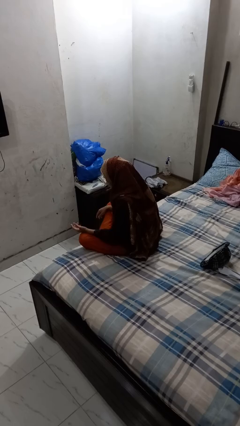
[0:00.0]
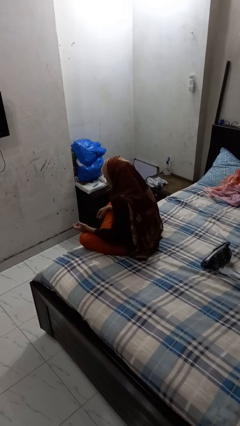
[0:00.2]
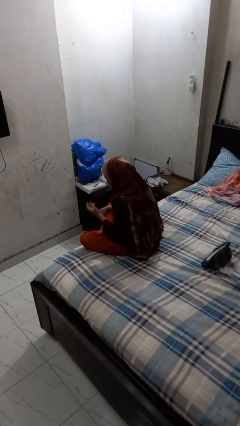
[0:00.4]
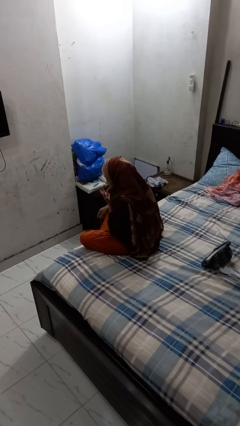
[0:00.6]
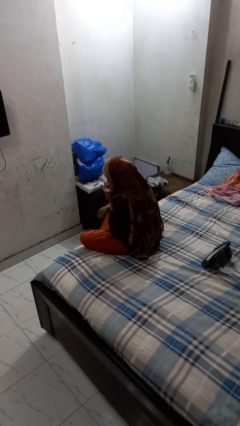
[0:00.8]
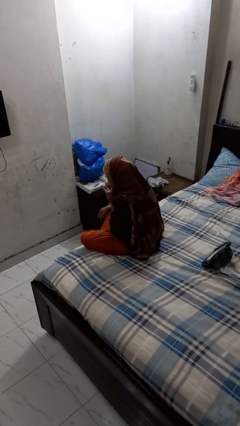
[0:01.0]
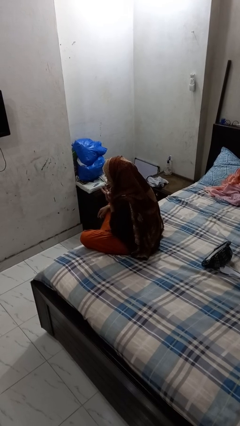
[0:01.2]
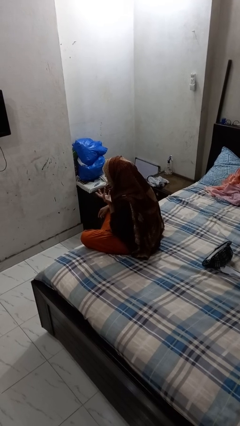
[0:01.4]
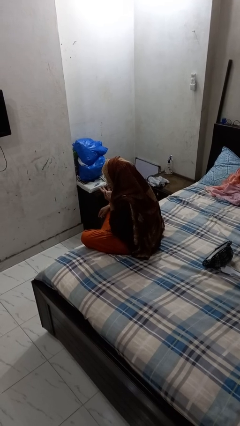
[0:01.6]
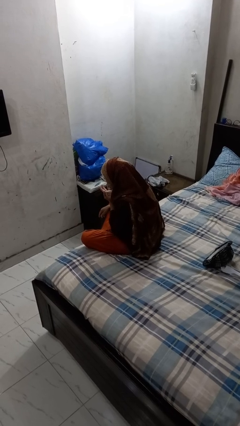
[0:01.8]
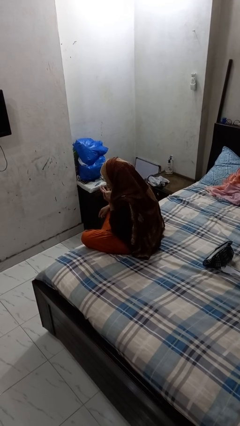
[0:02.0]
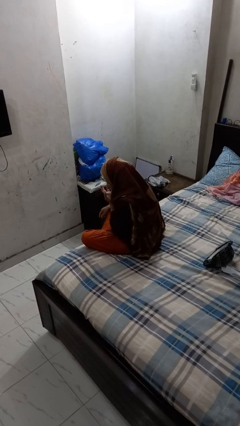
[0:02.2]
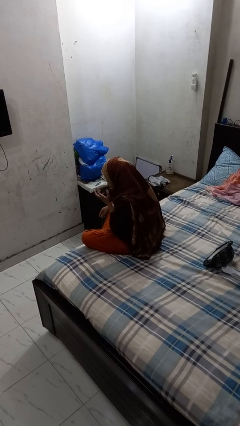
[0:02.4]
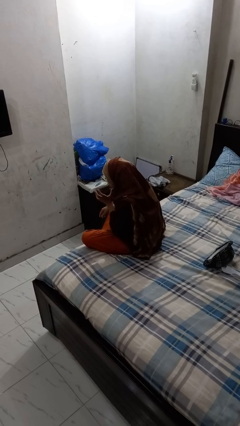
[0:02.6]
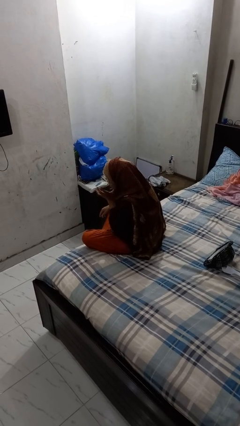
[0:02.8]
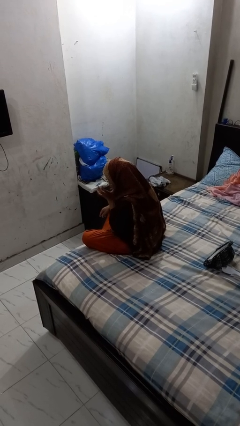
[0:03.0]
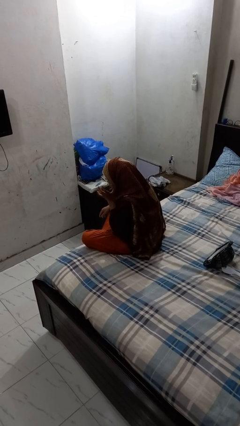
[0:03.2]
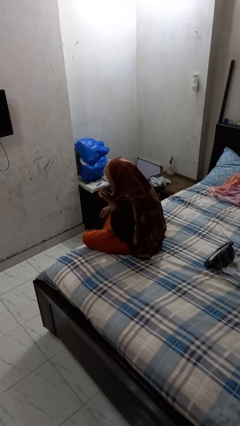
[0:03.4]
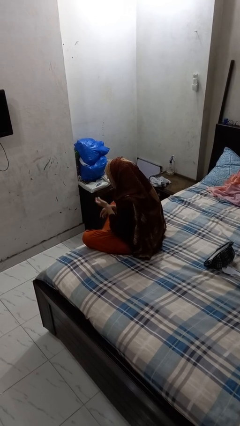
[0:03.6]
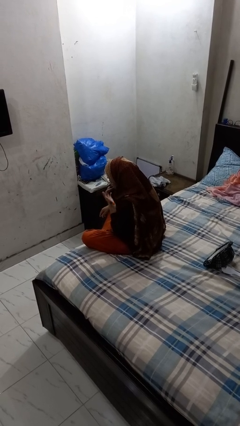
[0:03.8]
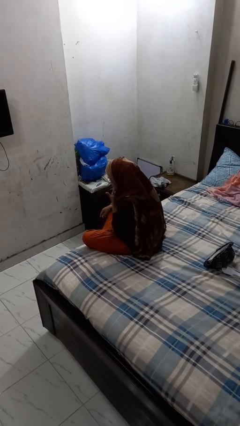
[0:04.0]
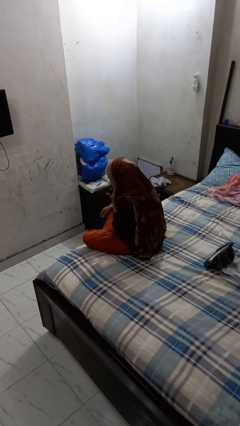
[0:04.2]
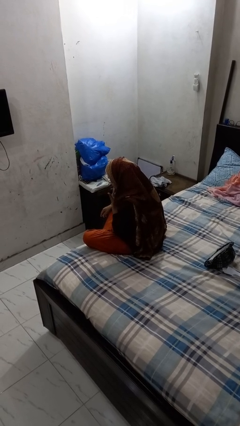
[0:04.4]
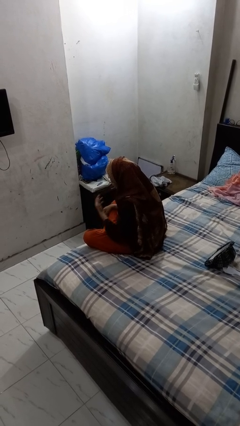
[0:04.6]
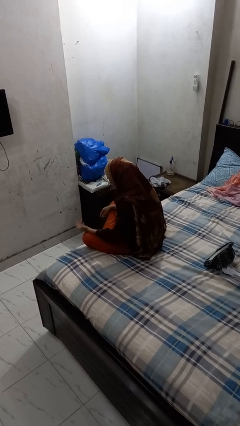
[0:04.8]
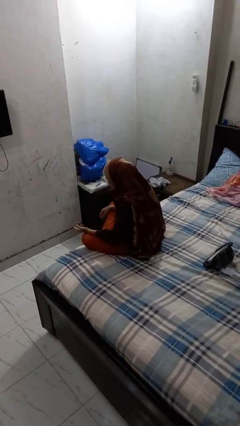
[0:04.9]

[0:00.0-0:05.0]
person licks fingers

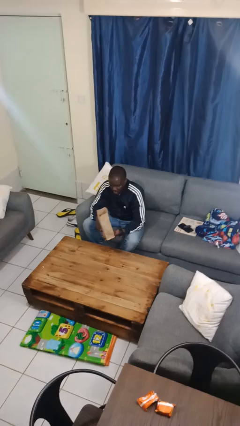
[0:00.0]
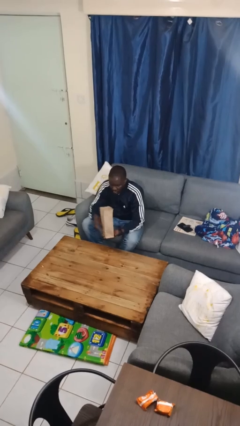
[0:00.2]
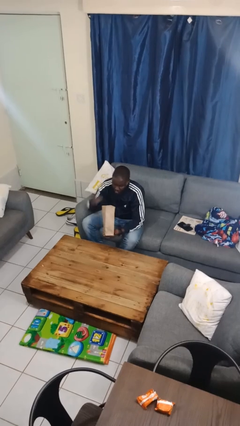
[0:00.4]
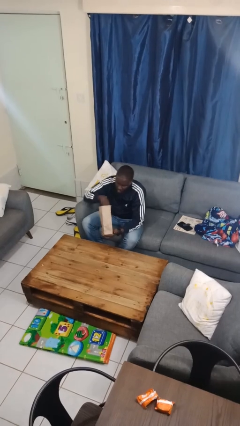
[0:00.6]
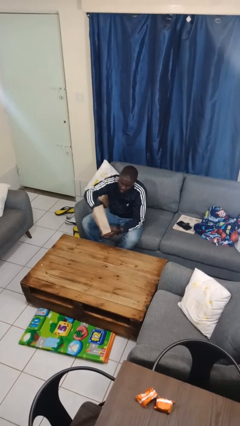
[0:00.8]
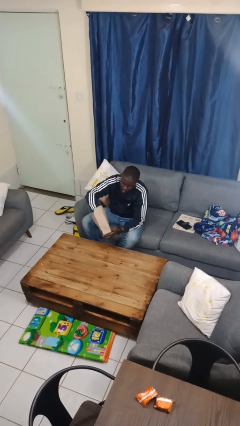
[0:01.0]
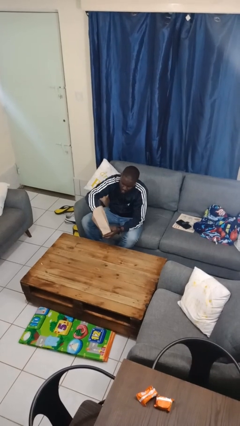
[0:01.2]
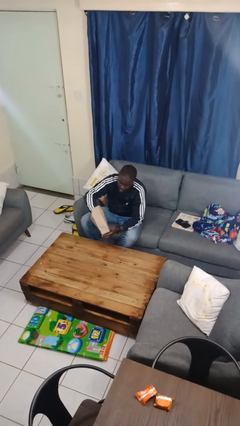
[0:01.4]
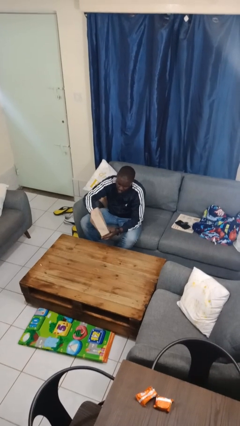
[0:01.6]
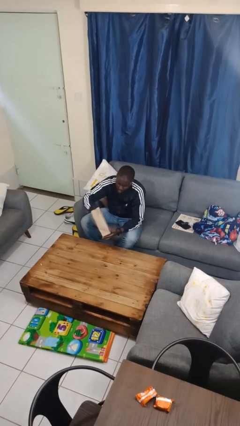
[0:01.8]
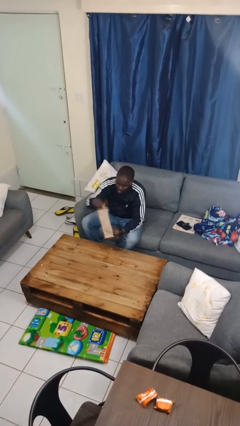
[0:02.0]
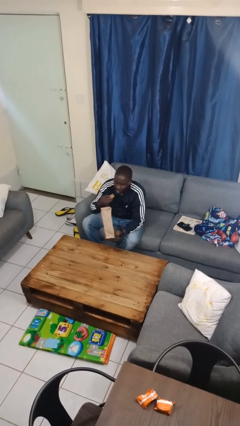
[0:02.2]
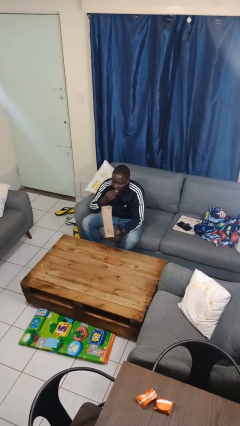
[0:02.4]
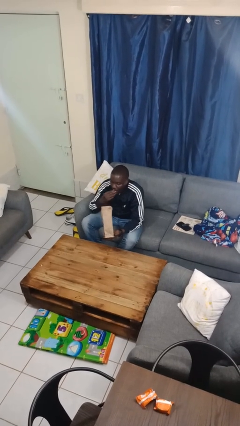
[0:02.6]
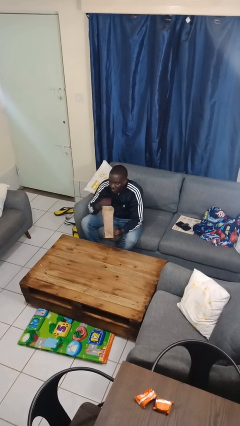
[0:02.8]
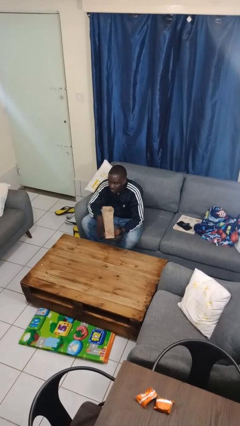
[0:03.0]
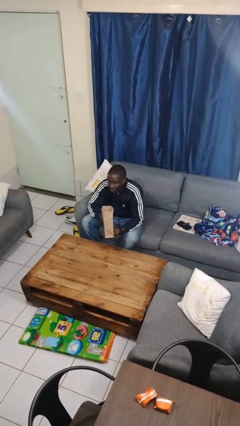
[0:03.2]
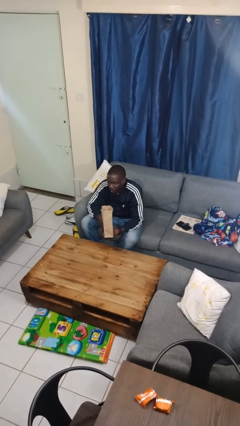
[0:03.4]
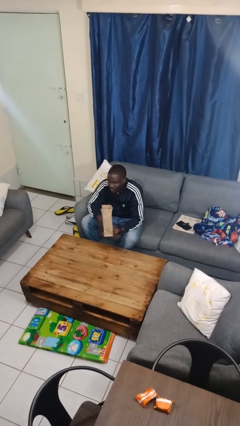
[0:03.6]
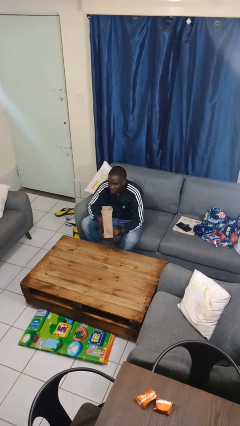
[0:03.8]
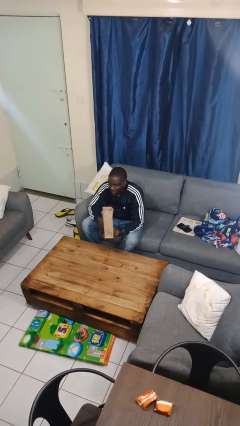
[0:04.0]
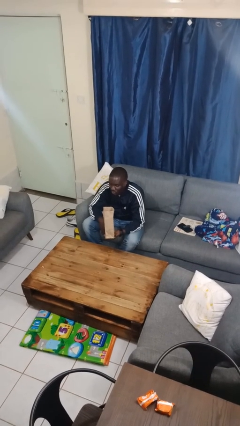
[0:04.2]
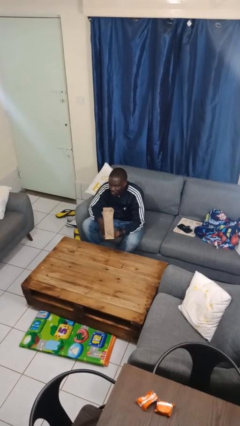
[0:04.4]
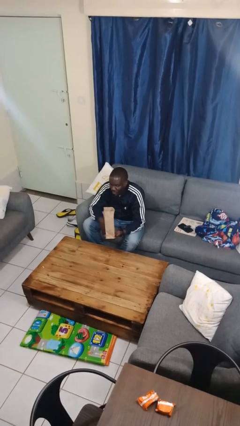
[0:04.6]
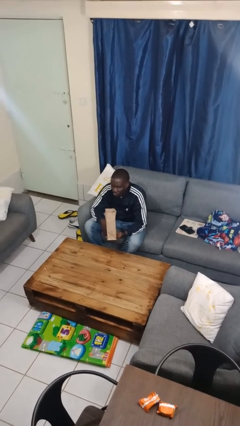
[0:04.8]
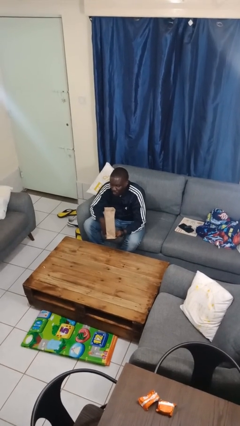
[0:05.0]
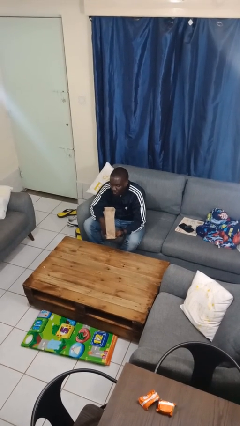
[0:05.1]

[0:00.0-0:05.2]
person eats snack from bag

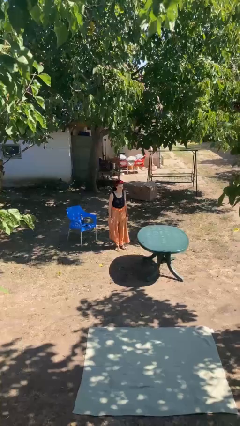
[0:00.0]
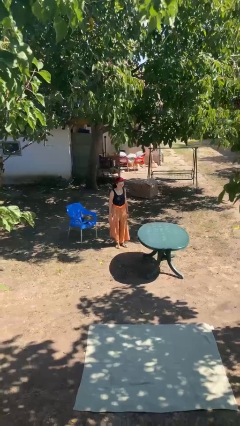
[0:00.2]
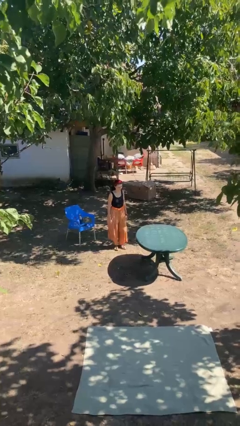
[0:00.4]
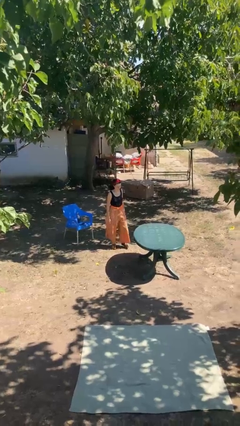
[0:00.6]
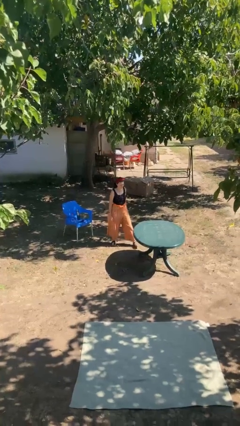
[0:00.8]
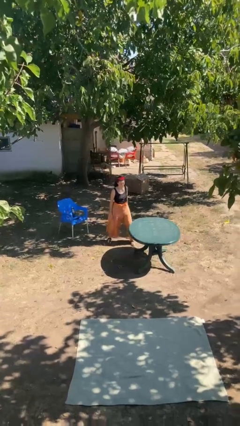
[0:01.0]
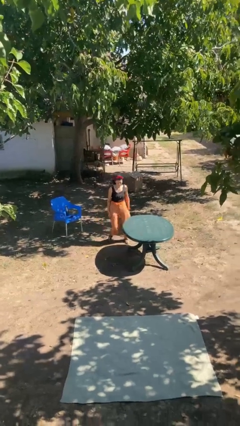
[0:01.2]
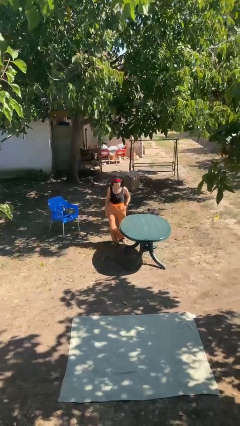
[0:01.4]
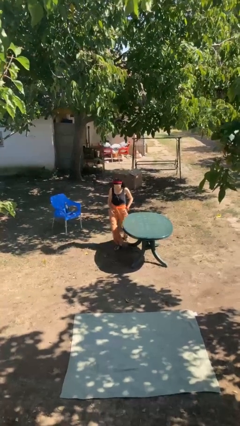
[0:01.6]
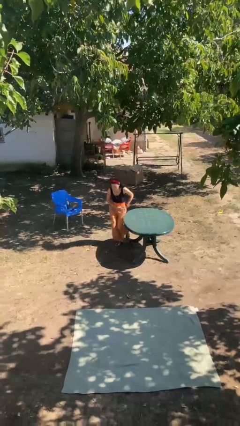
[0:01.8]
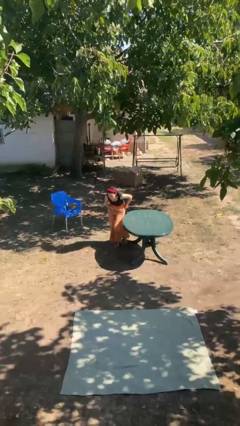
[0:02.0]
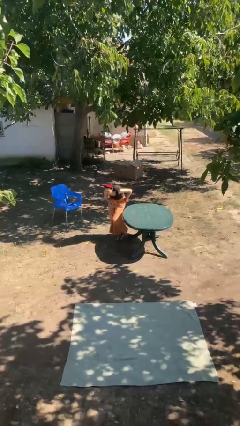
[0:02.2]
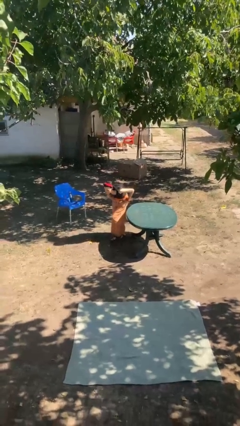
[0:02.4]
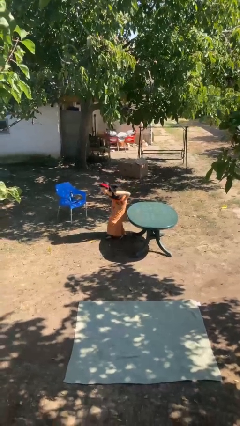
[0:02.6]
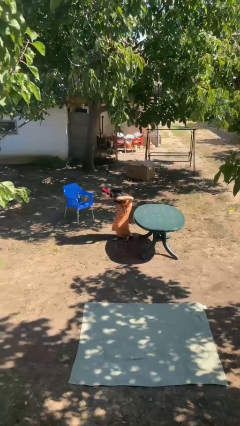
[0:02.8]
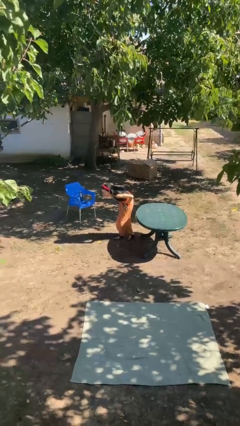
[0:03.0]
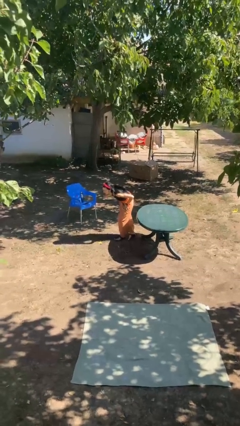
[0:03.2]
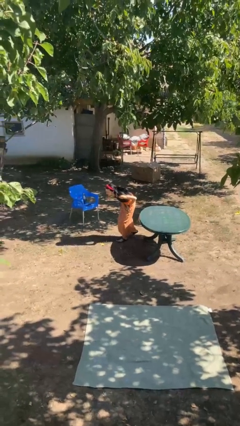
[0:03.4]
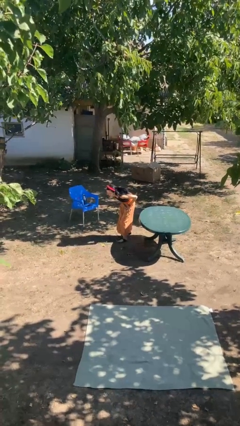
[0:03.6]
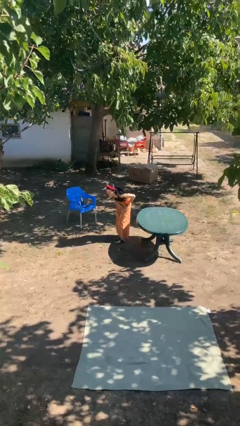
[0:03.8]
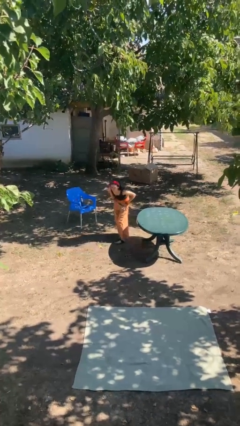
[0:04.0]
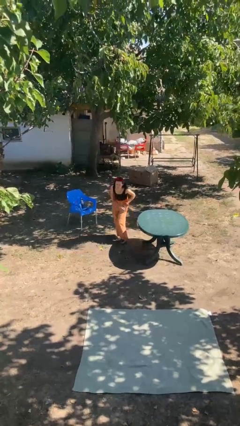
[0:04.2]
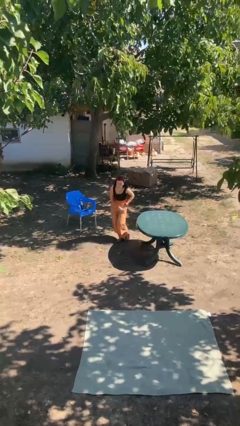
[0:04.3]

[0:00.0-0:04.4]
person bumps into table

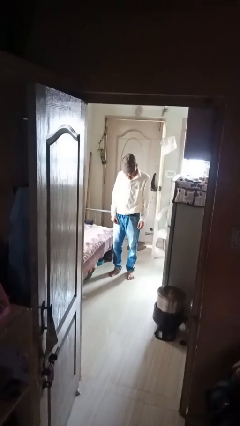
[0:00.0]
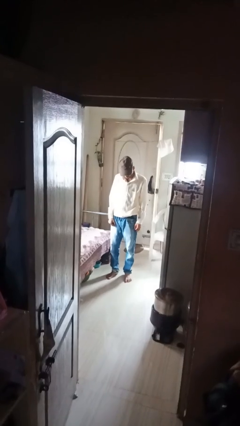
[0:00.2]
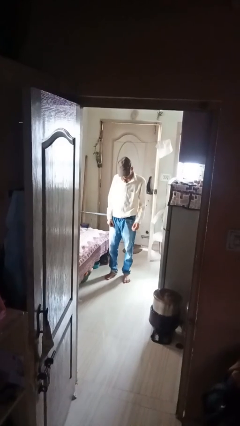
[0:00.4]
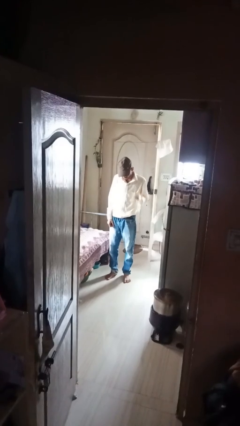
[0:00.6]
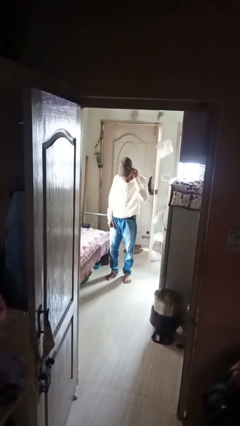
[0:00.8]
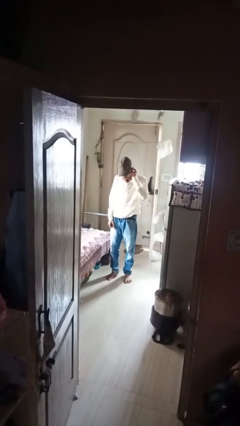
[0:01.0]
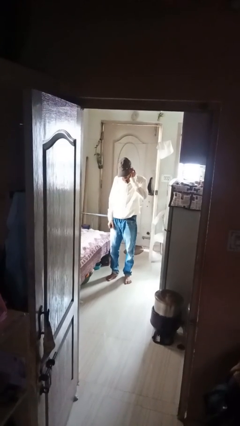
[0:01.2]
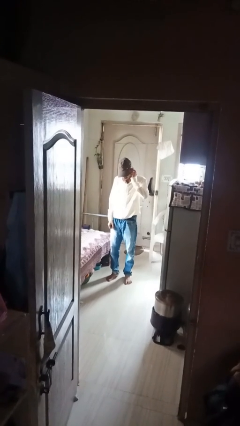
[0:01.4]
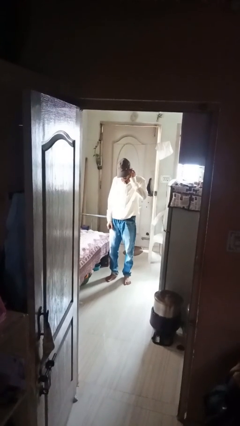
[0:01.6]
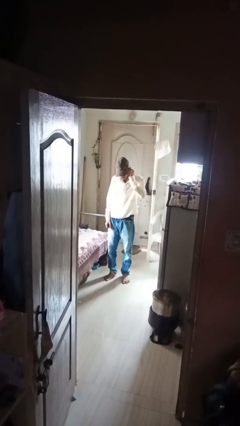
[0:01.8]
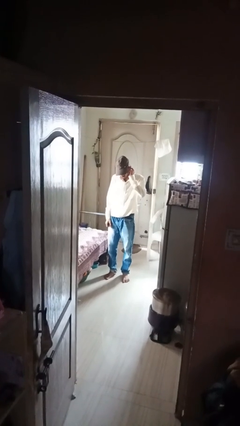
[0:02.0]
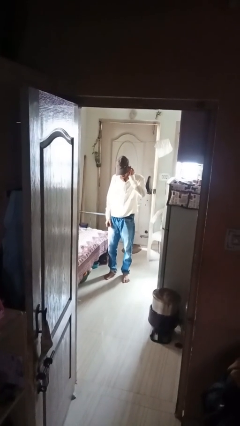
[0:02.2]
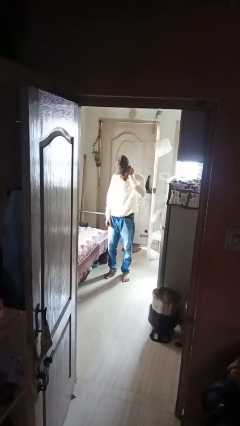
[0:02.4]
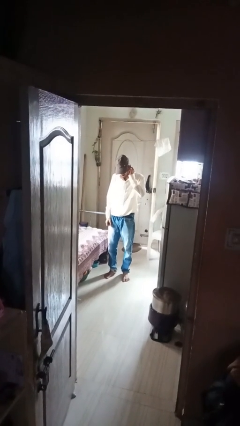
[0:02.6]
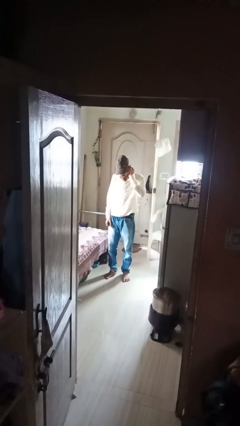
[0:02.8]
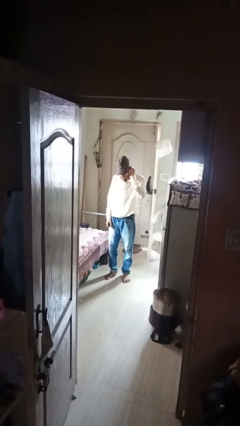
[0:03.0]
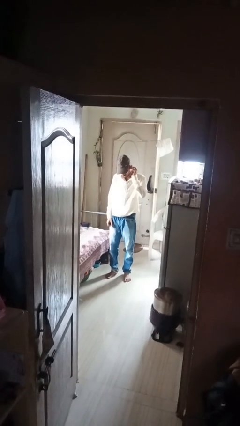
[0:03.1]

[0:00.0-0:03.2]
person touches earlobe
